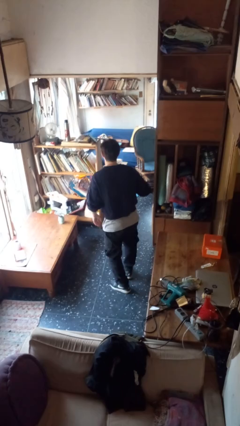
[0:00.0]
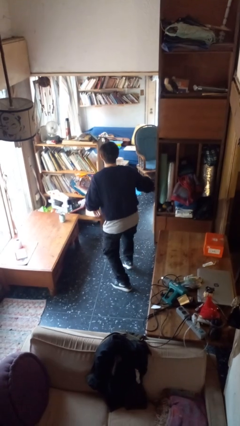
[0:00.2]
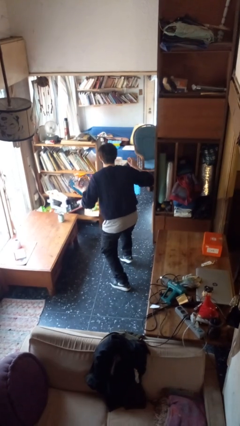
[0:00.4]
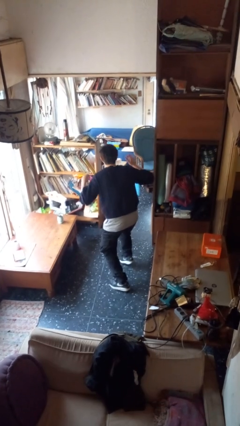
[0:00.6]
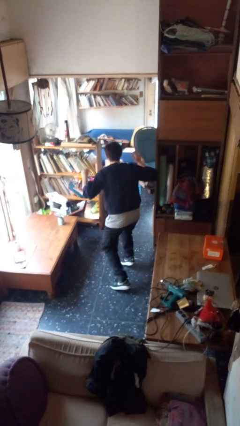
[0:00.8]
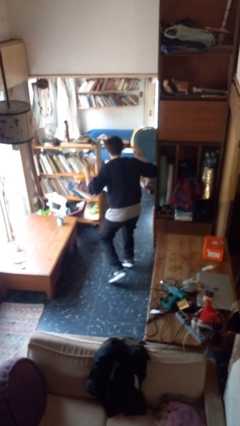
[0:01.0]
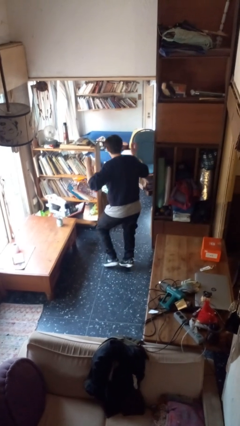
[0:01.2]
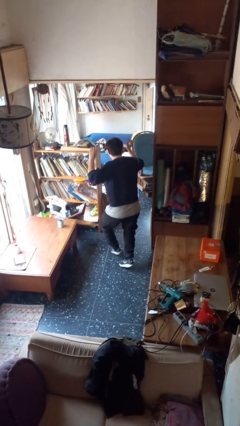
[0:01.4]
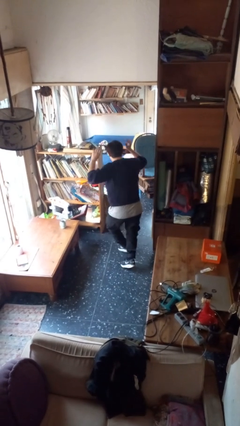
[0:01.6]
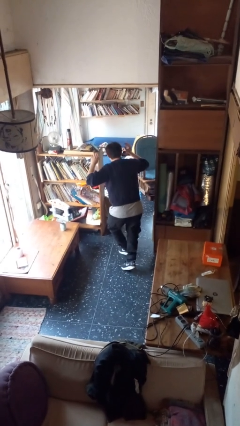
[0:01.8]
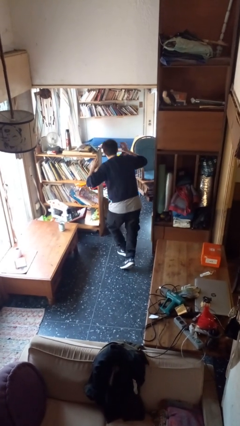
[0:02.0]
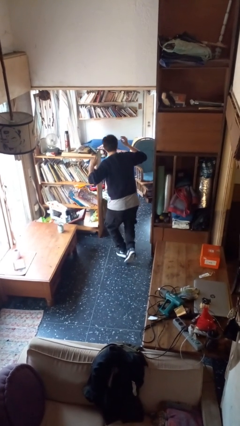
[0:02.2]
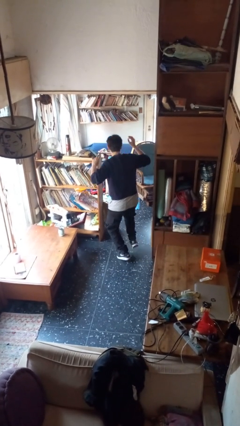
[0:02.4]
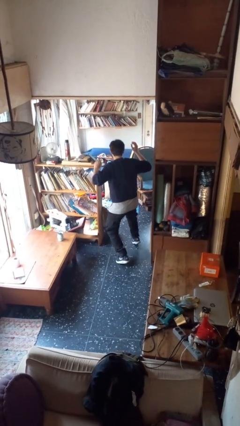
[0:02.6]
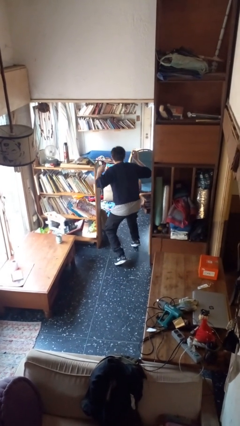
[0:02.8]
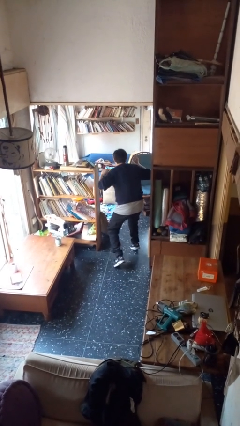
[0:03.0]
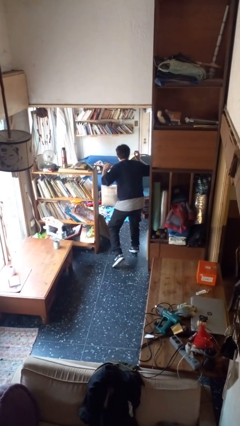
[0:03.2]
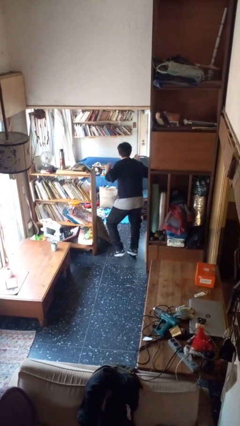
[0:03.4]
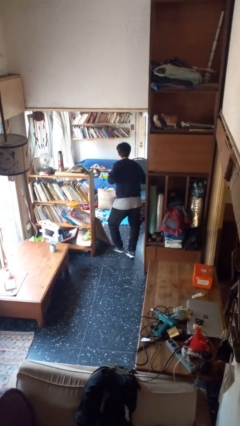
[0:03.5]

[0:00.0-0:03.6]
person walks tiptoe

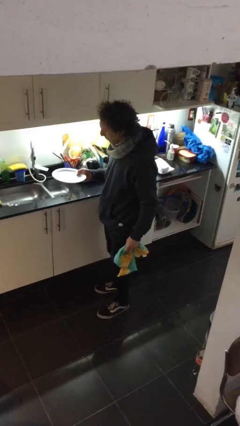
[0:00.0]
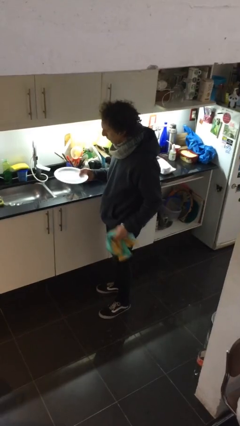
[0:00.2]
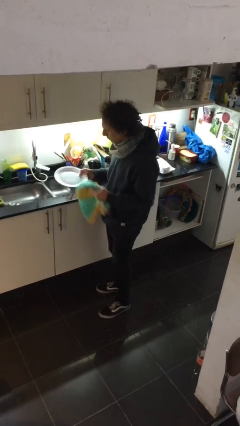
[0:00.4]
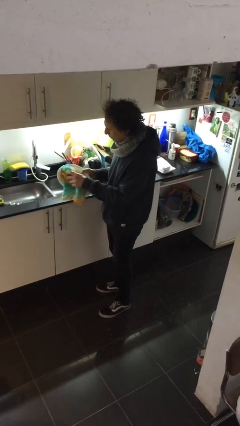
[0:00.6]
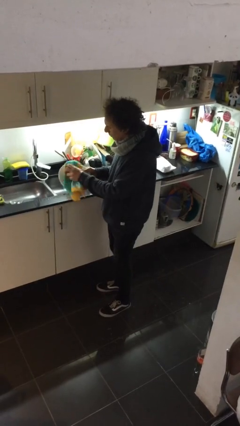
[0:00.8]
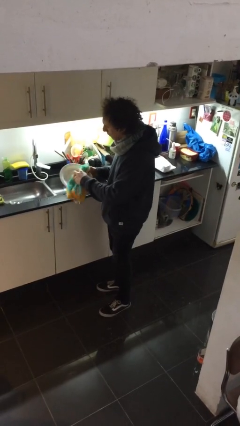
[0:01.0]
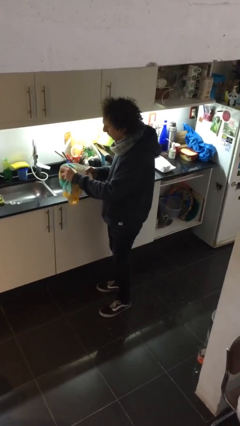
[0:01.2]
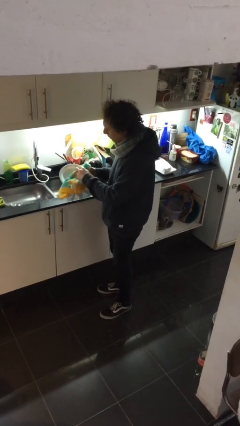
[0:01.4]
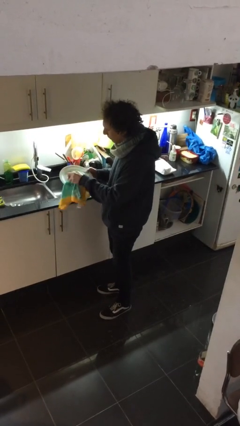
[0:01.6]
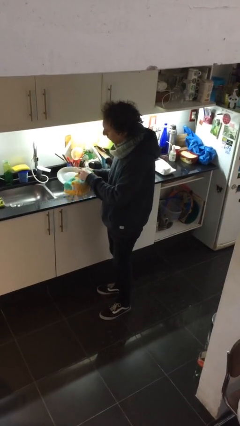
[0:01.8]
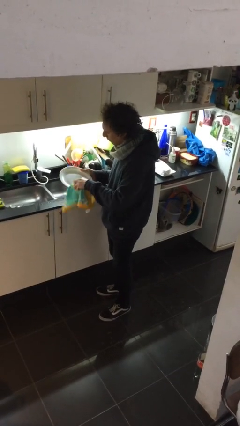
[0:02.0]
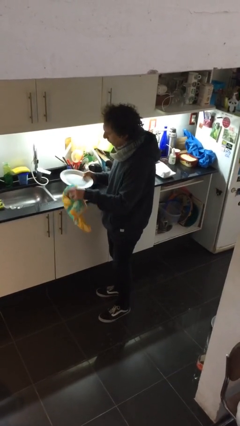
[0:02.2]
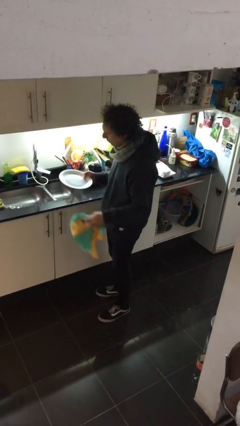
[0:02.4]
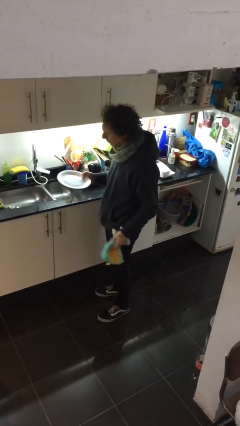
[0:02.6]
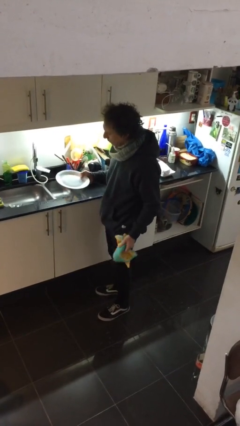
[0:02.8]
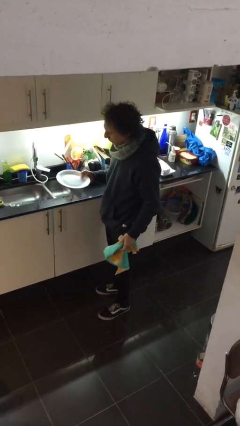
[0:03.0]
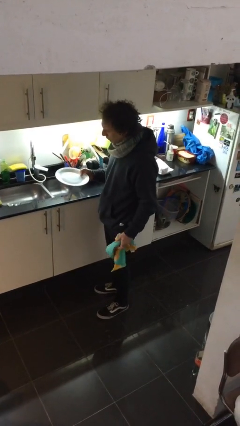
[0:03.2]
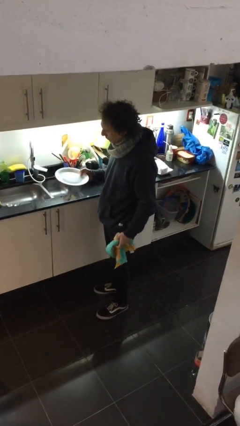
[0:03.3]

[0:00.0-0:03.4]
person dries dish

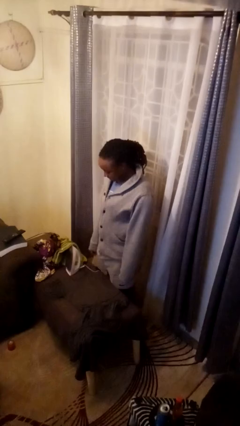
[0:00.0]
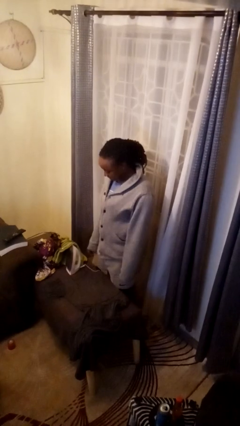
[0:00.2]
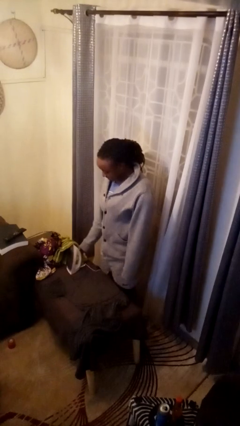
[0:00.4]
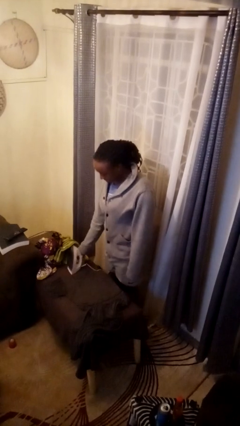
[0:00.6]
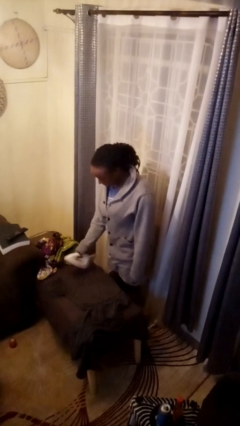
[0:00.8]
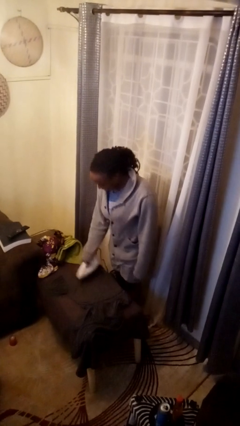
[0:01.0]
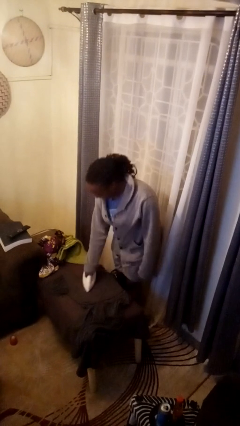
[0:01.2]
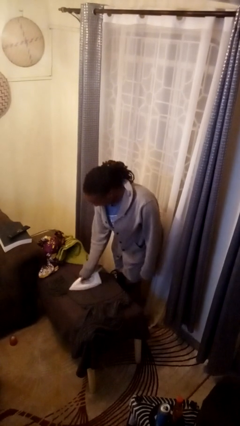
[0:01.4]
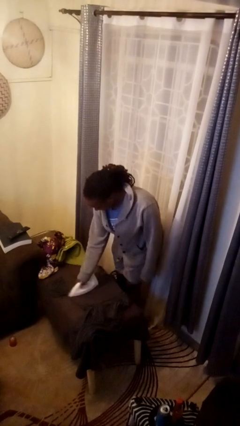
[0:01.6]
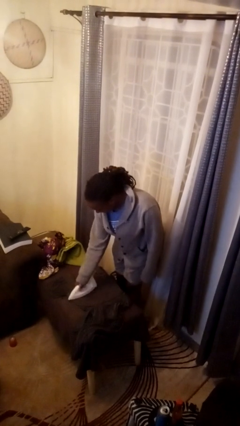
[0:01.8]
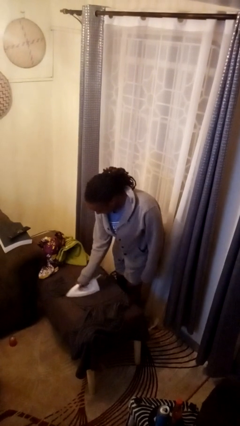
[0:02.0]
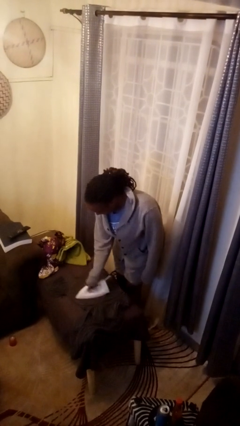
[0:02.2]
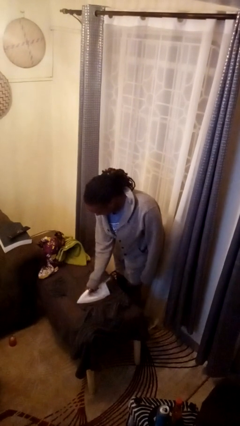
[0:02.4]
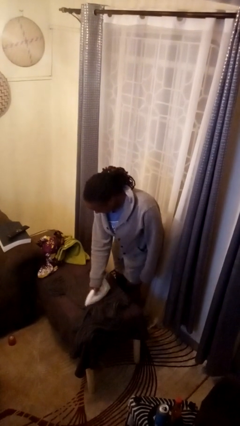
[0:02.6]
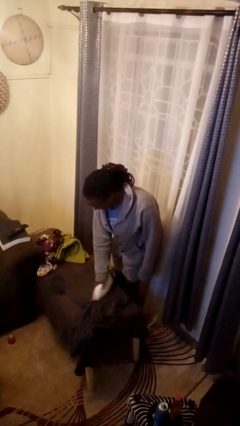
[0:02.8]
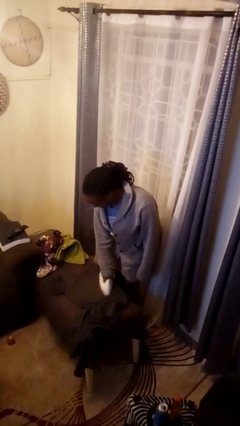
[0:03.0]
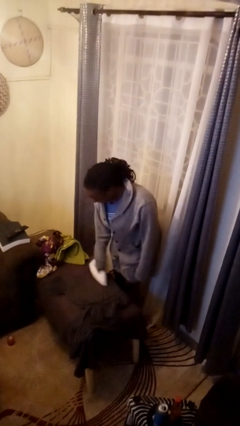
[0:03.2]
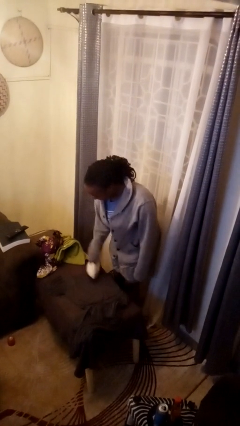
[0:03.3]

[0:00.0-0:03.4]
person irons clothes

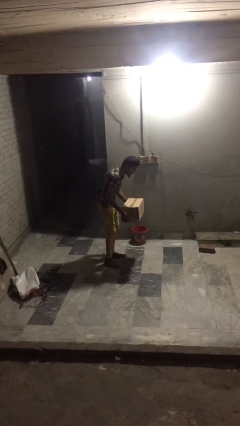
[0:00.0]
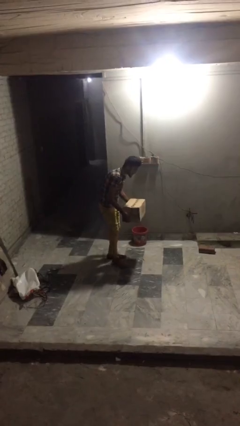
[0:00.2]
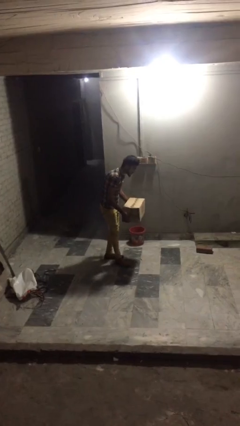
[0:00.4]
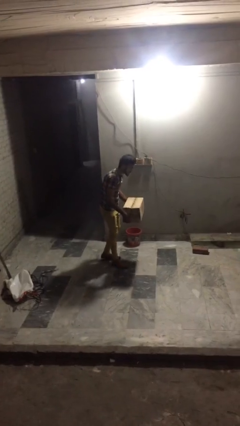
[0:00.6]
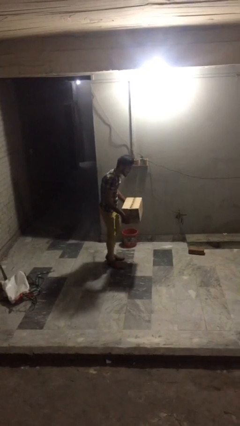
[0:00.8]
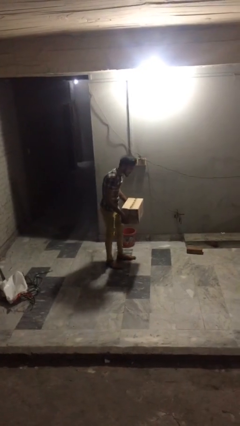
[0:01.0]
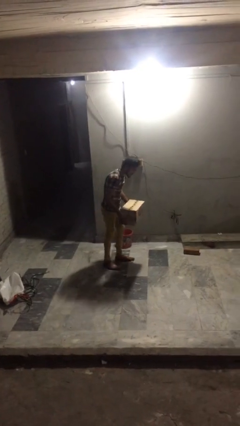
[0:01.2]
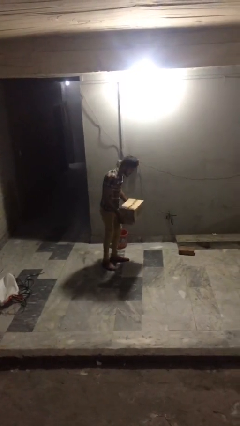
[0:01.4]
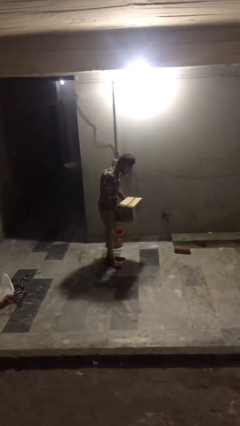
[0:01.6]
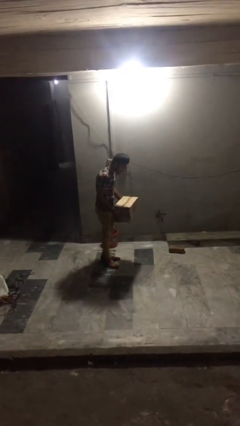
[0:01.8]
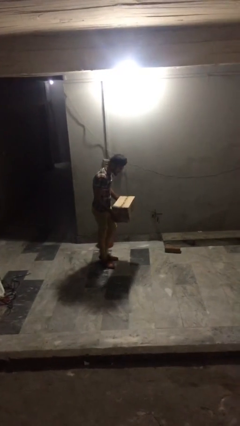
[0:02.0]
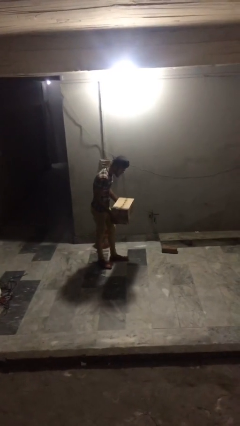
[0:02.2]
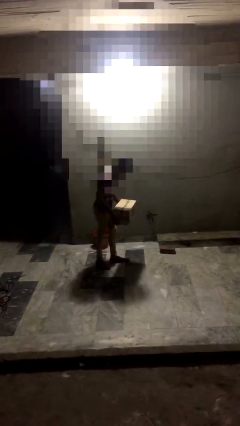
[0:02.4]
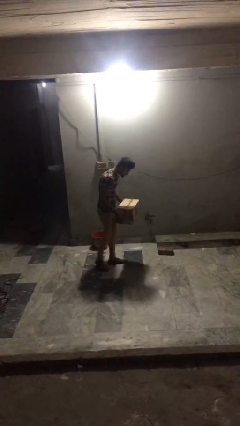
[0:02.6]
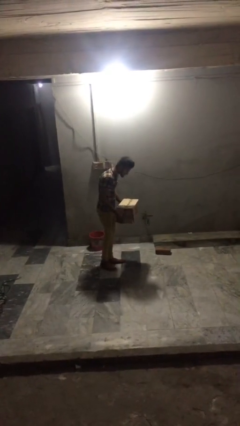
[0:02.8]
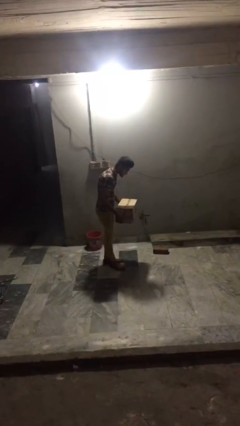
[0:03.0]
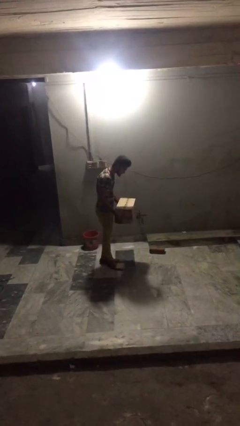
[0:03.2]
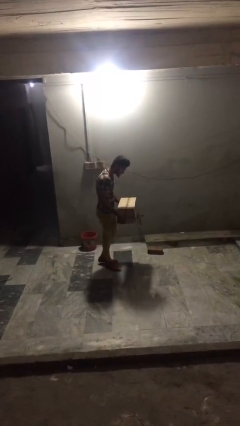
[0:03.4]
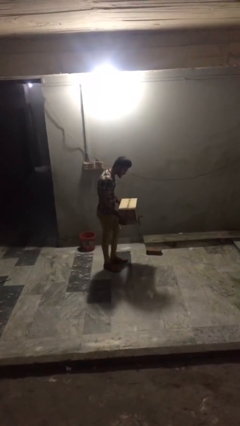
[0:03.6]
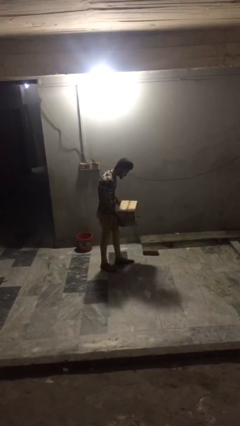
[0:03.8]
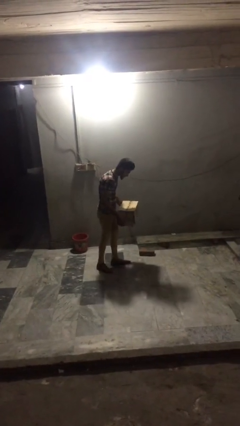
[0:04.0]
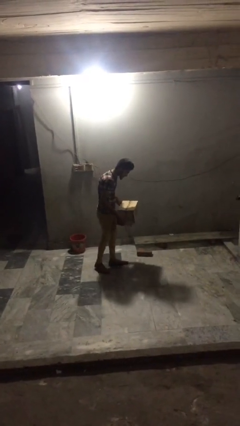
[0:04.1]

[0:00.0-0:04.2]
person carries heavy object

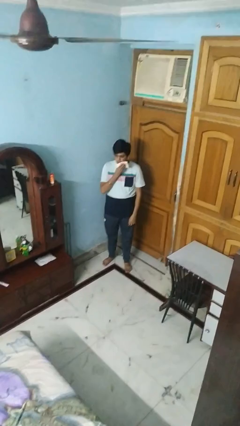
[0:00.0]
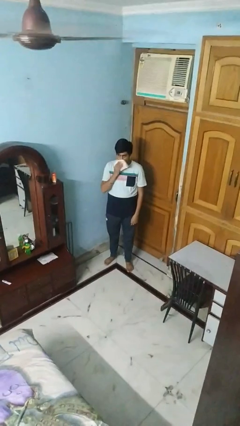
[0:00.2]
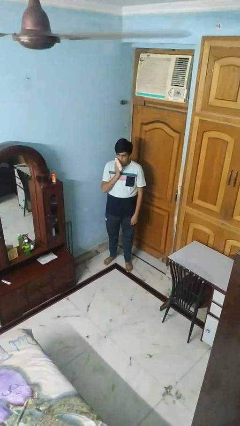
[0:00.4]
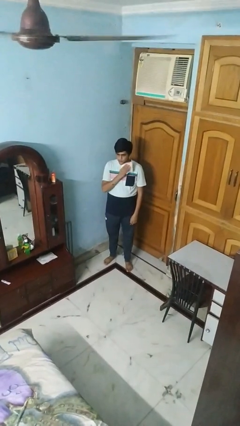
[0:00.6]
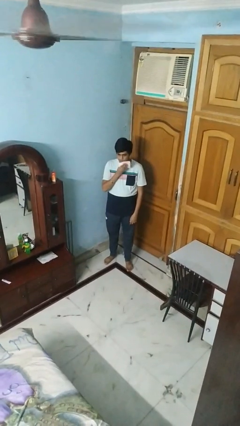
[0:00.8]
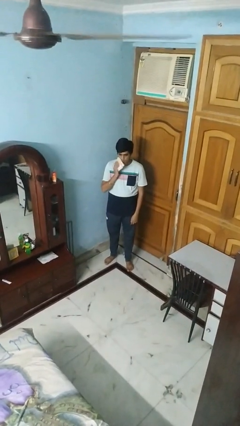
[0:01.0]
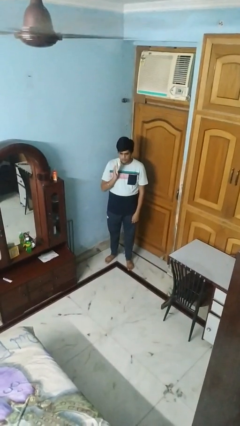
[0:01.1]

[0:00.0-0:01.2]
person wipes mouth with napkin

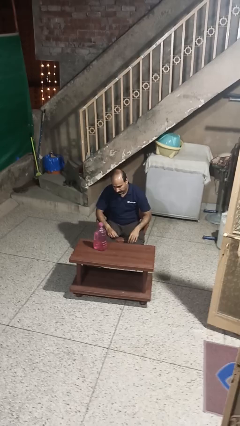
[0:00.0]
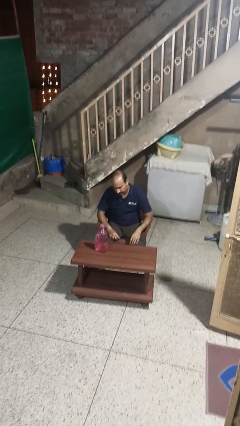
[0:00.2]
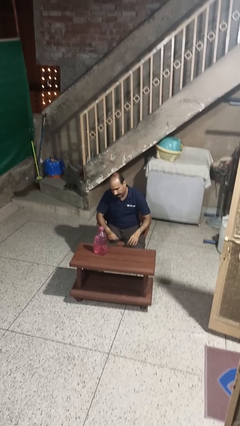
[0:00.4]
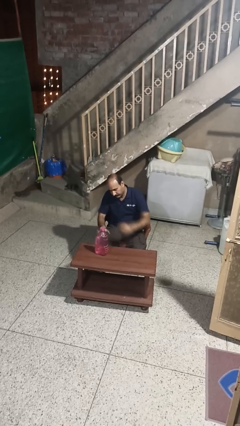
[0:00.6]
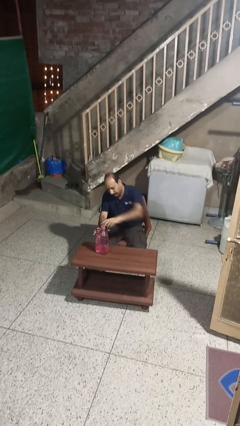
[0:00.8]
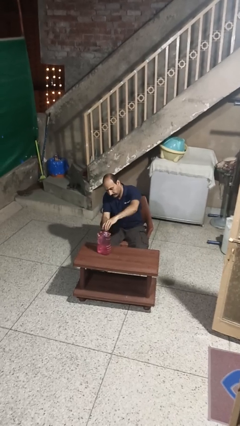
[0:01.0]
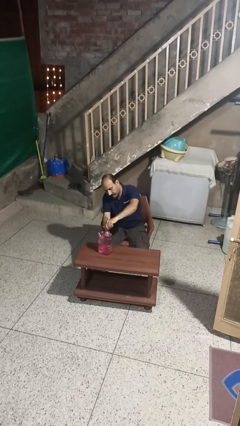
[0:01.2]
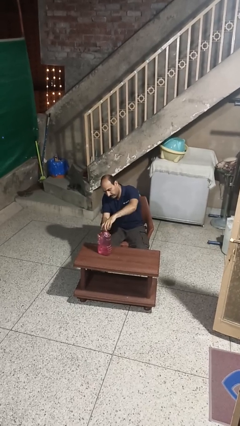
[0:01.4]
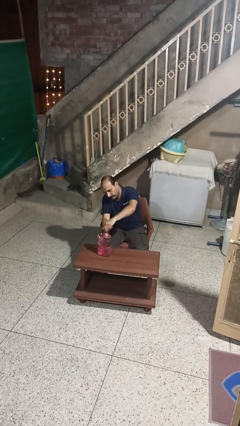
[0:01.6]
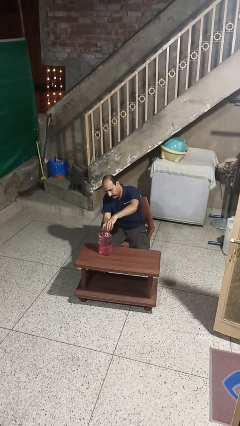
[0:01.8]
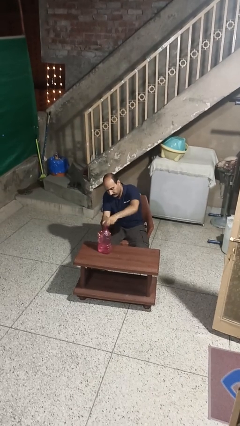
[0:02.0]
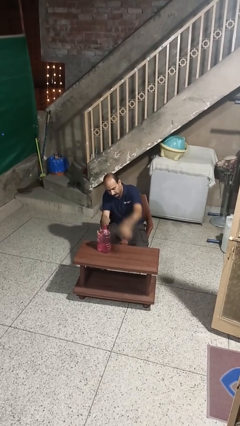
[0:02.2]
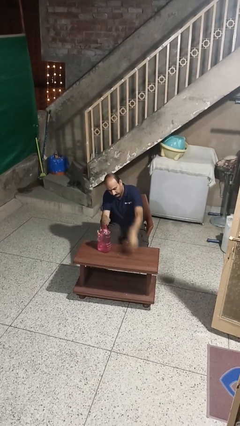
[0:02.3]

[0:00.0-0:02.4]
person unscrews lid from bottle
